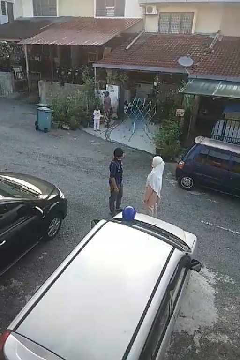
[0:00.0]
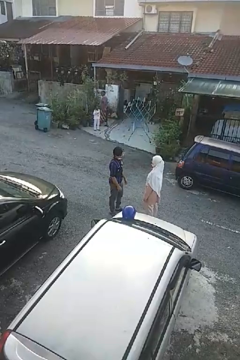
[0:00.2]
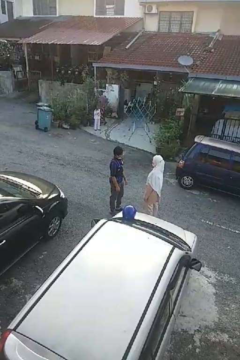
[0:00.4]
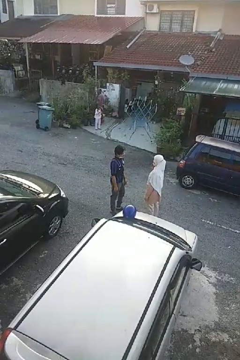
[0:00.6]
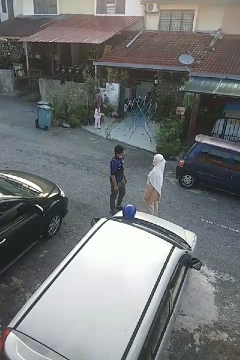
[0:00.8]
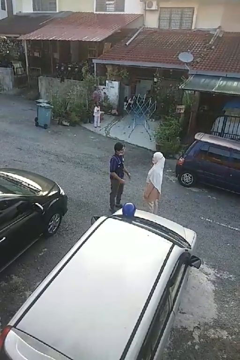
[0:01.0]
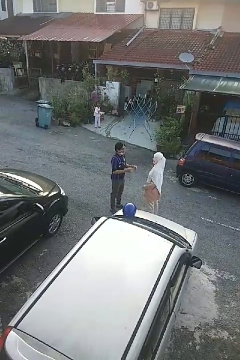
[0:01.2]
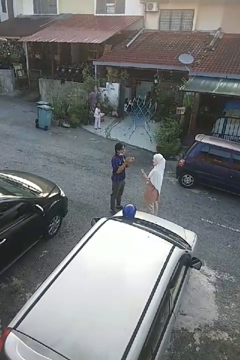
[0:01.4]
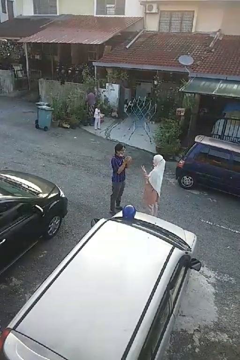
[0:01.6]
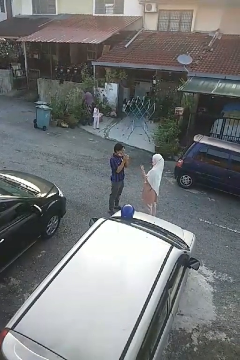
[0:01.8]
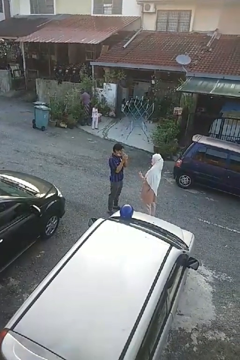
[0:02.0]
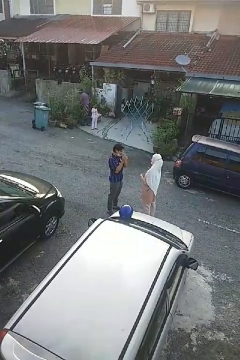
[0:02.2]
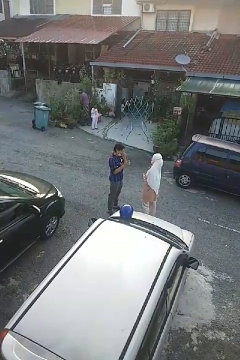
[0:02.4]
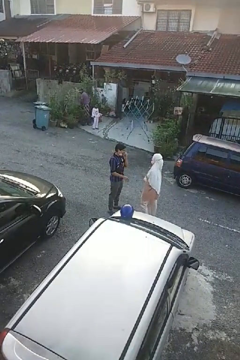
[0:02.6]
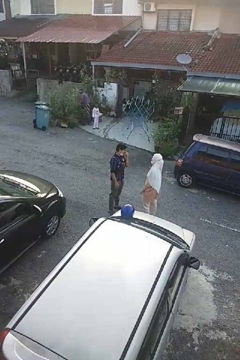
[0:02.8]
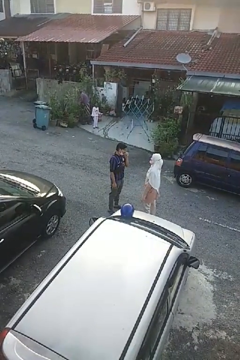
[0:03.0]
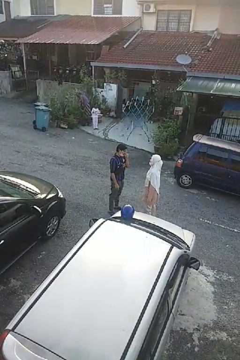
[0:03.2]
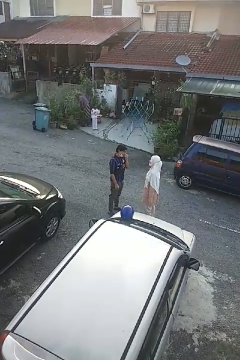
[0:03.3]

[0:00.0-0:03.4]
person laughs with person

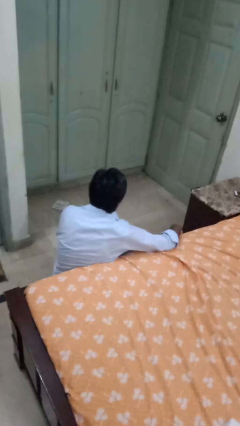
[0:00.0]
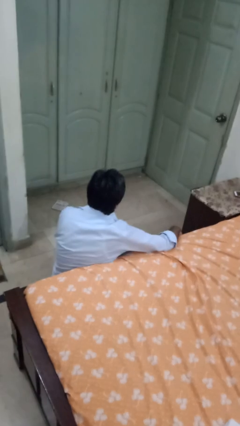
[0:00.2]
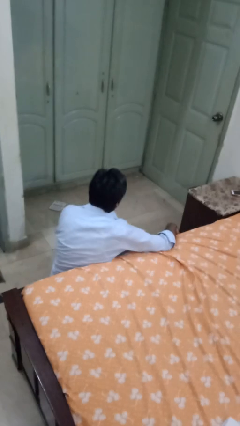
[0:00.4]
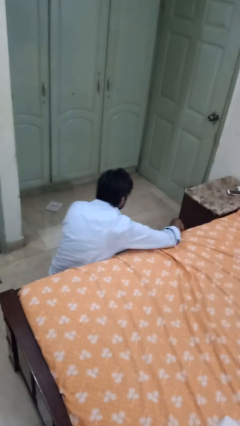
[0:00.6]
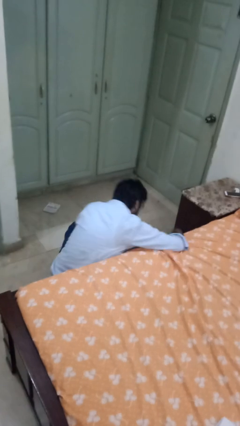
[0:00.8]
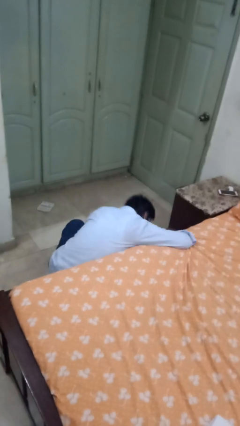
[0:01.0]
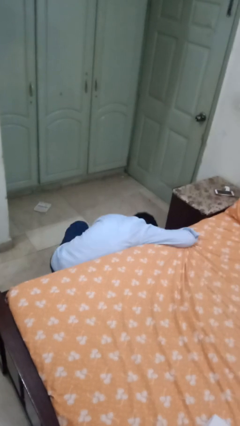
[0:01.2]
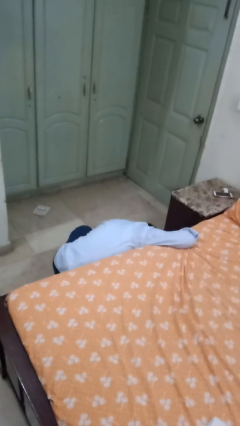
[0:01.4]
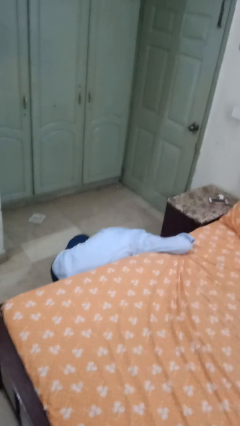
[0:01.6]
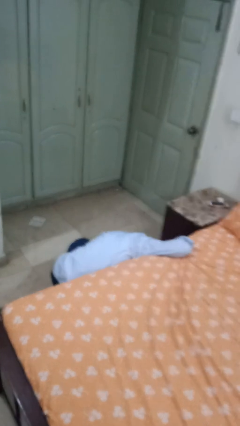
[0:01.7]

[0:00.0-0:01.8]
person searches under bed

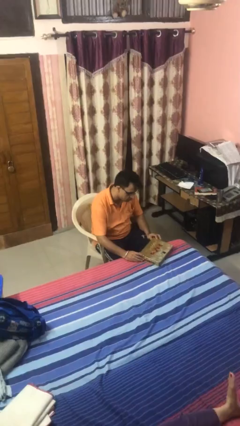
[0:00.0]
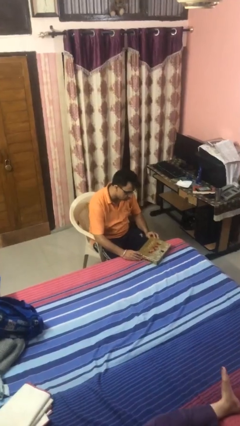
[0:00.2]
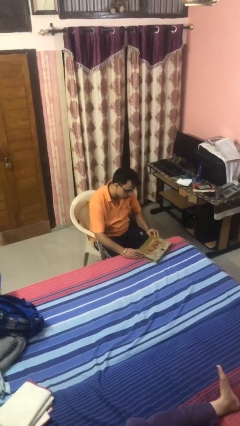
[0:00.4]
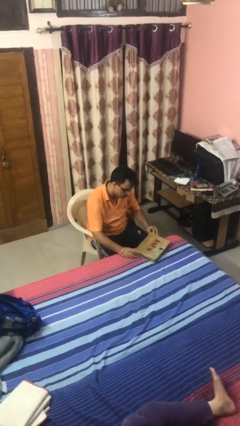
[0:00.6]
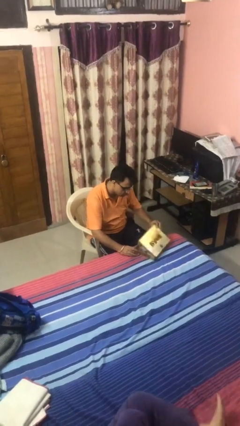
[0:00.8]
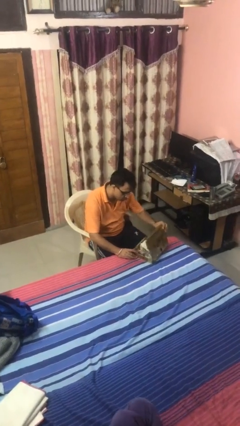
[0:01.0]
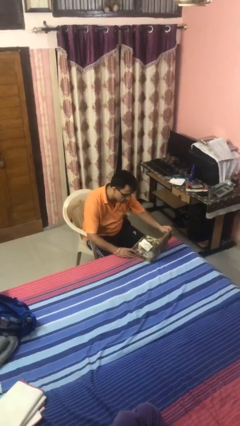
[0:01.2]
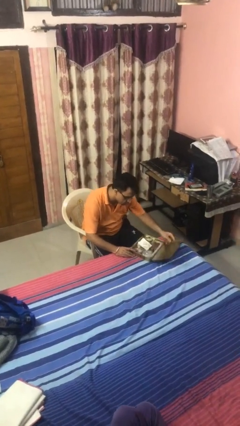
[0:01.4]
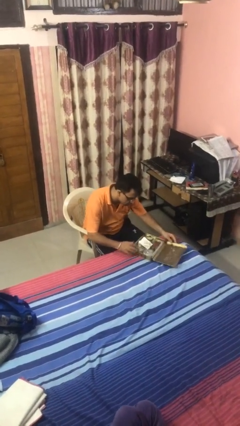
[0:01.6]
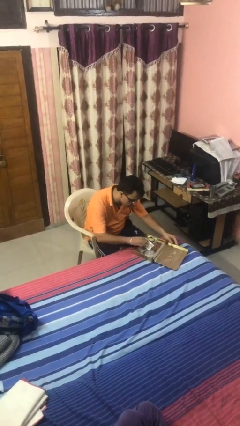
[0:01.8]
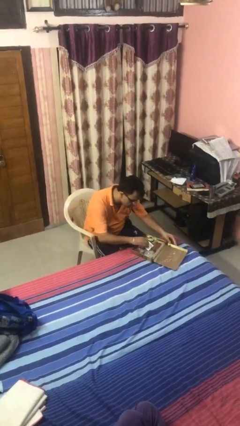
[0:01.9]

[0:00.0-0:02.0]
person opens jewelry box

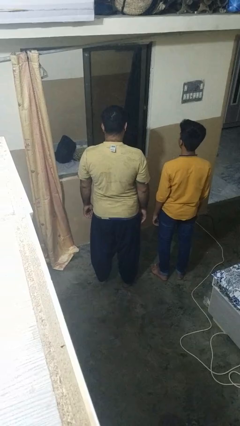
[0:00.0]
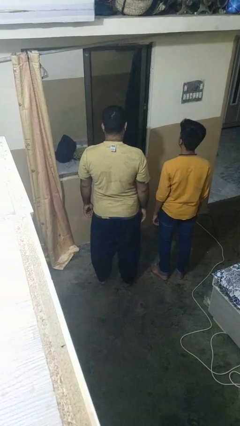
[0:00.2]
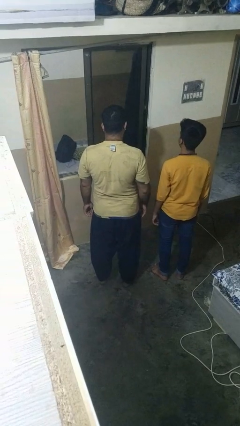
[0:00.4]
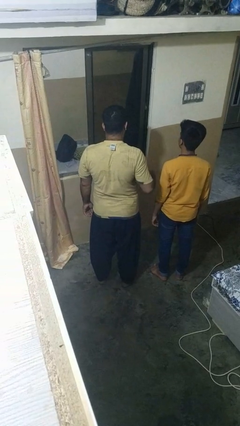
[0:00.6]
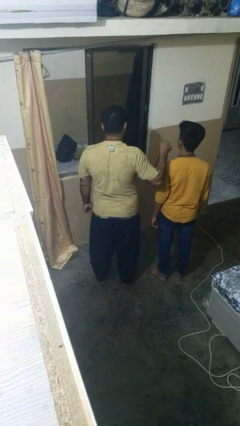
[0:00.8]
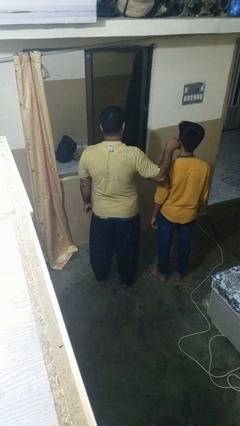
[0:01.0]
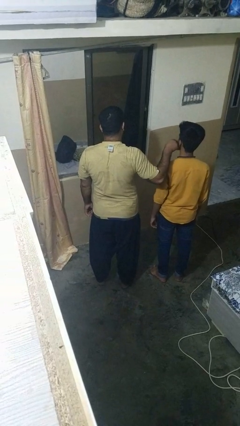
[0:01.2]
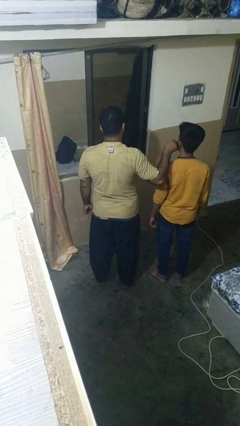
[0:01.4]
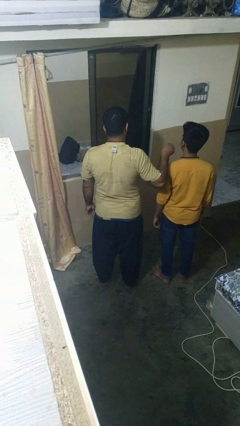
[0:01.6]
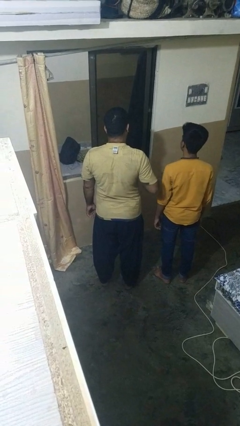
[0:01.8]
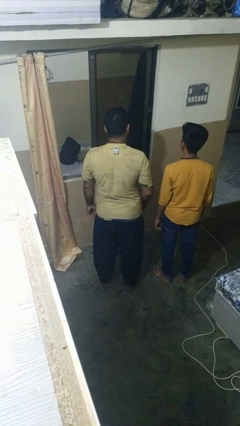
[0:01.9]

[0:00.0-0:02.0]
person touches face of person

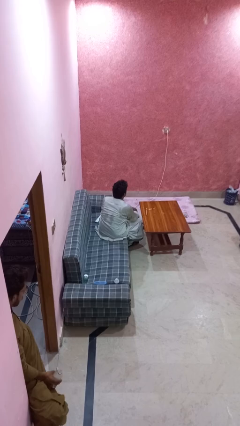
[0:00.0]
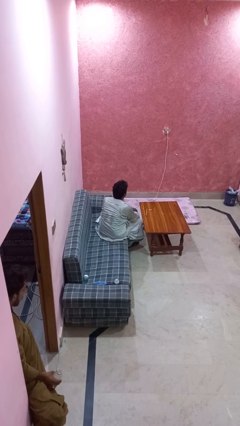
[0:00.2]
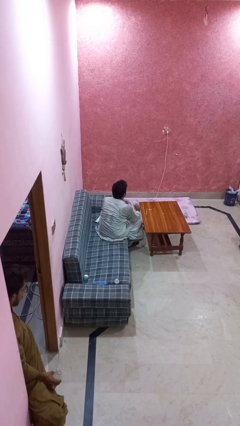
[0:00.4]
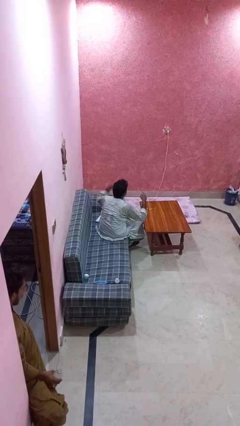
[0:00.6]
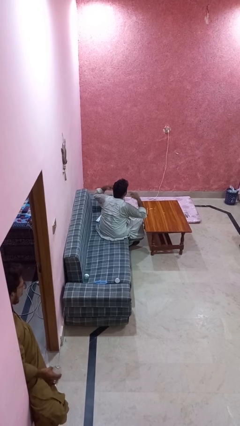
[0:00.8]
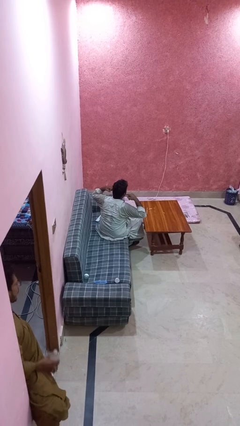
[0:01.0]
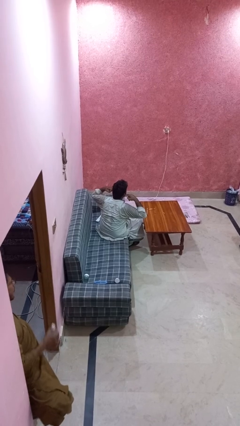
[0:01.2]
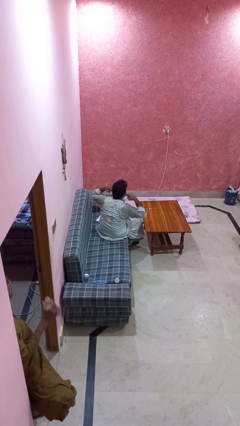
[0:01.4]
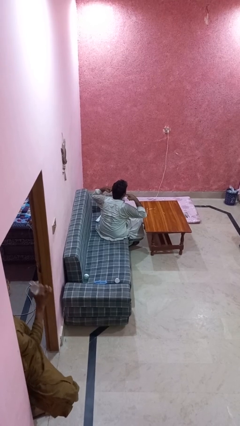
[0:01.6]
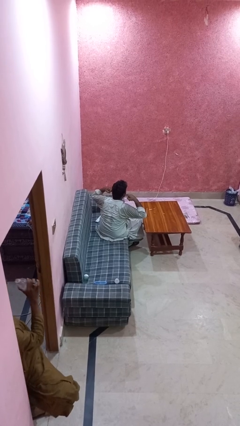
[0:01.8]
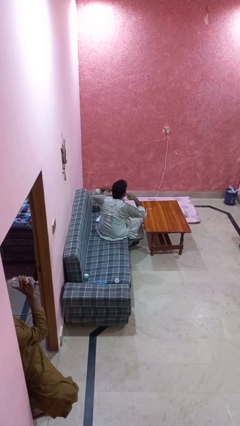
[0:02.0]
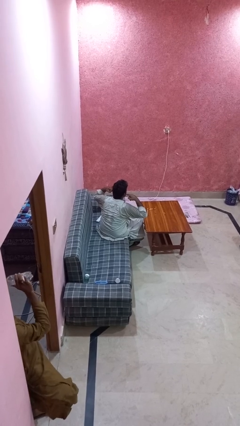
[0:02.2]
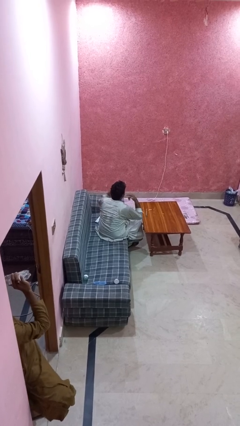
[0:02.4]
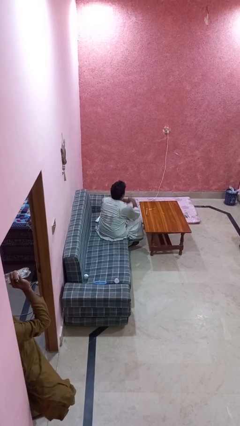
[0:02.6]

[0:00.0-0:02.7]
person puts fingers in ear

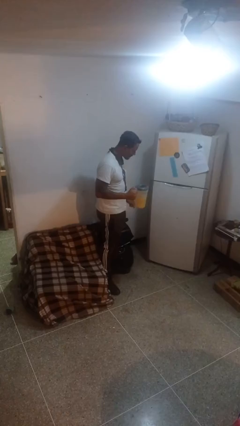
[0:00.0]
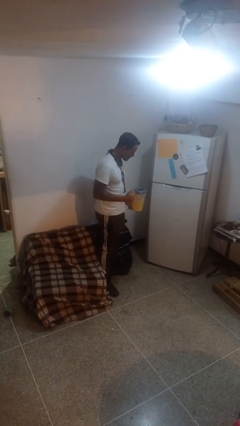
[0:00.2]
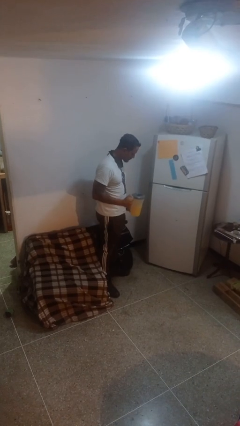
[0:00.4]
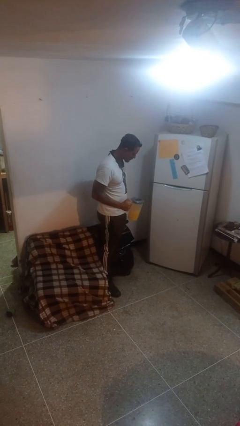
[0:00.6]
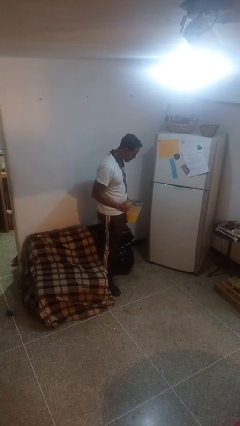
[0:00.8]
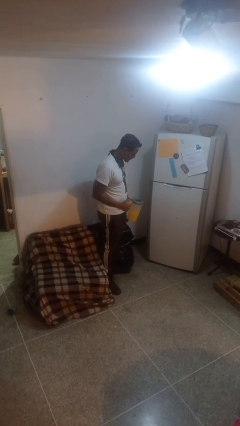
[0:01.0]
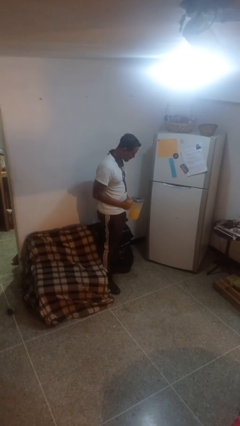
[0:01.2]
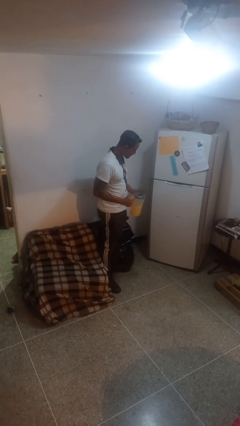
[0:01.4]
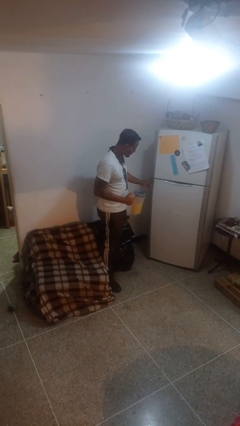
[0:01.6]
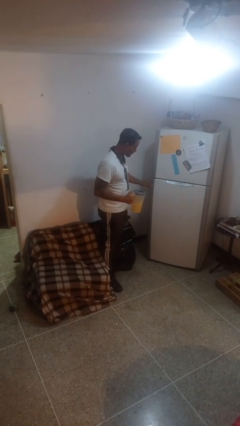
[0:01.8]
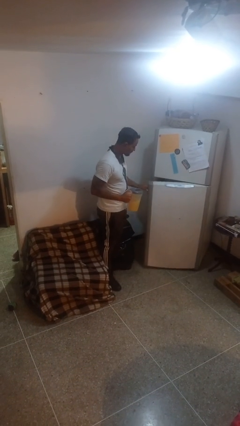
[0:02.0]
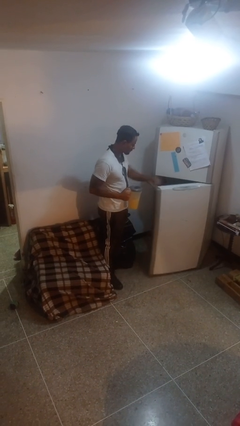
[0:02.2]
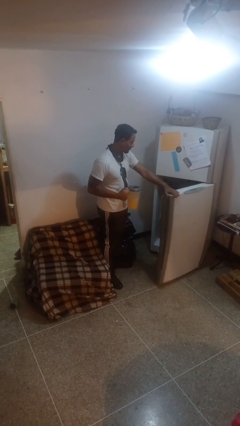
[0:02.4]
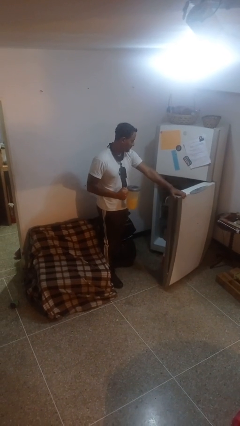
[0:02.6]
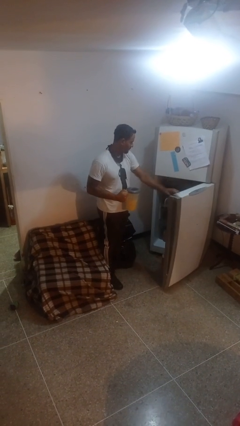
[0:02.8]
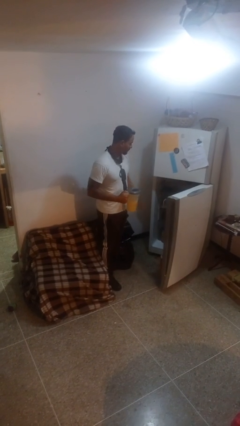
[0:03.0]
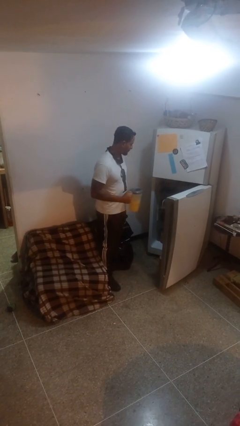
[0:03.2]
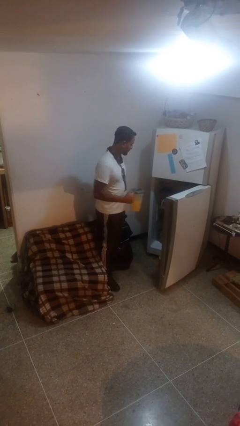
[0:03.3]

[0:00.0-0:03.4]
person opens refrigerator

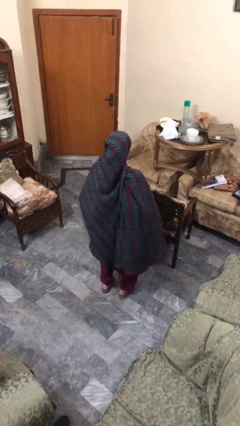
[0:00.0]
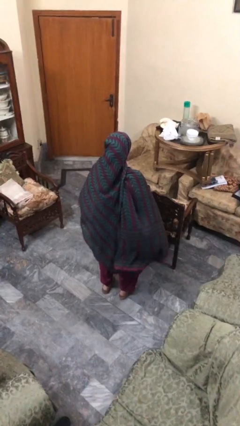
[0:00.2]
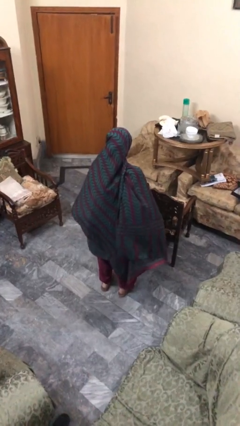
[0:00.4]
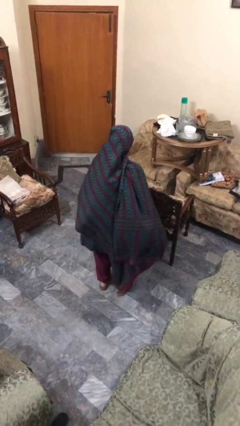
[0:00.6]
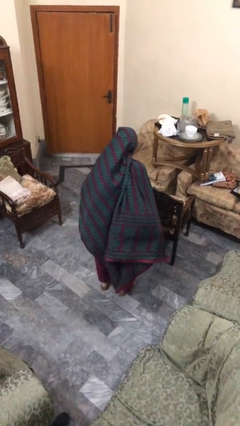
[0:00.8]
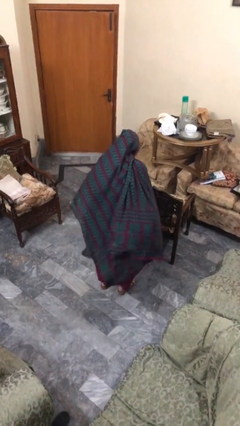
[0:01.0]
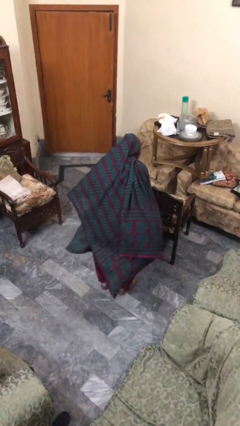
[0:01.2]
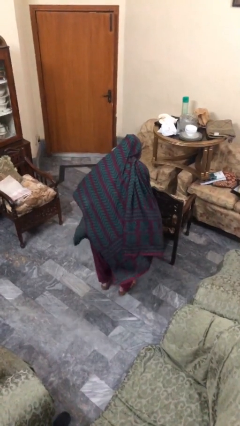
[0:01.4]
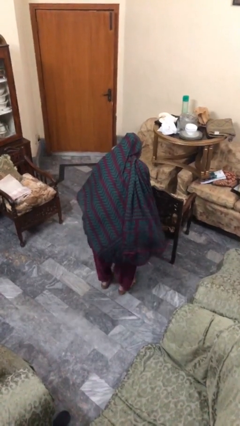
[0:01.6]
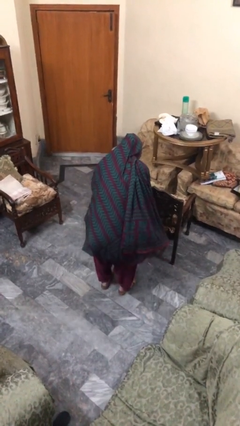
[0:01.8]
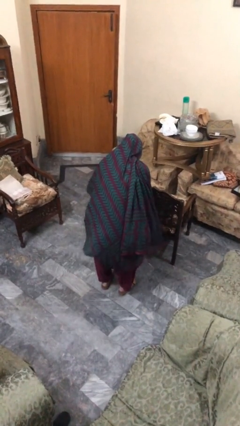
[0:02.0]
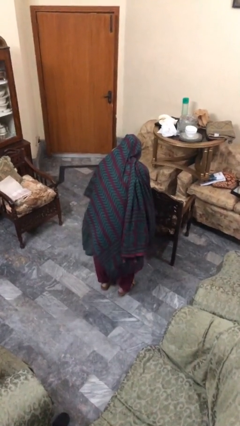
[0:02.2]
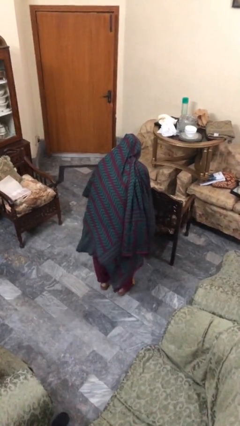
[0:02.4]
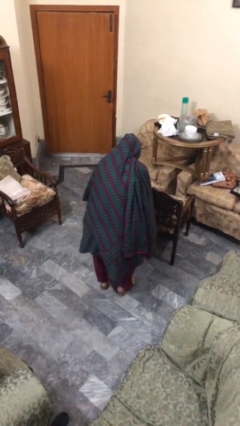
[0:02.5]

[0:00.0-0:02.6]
person bows
